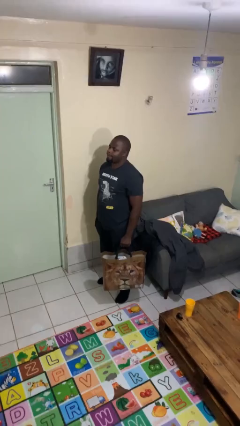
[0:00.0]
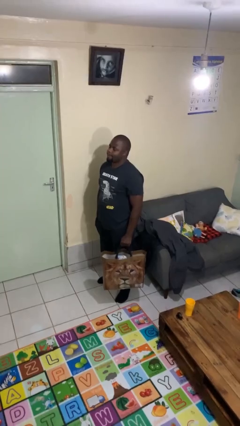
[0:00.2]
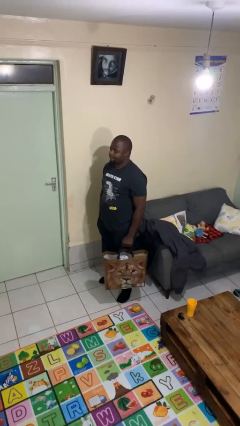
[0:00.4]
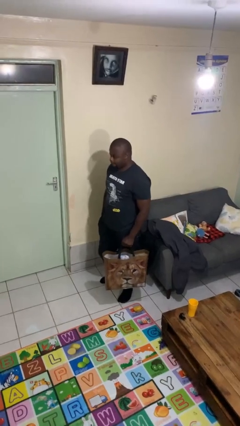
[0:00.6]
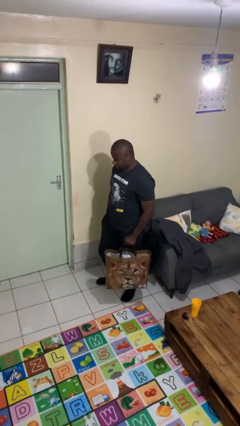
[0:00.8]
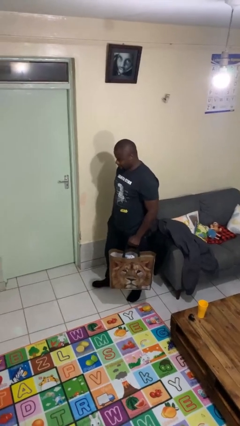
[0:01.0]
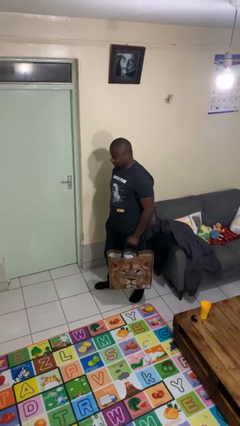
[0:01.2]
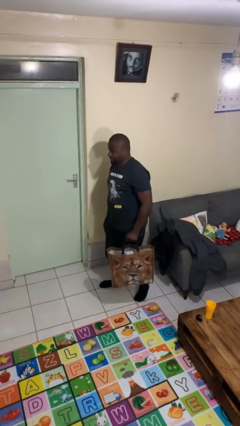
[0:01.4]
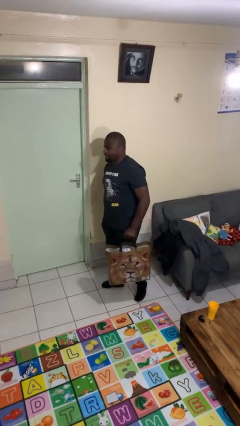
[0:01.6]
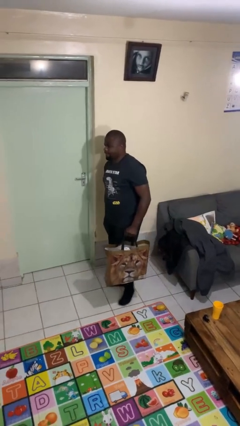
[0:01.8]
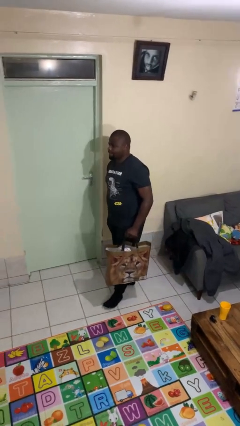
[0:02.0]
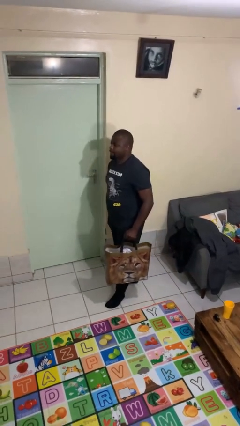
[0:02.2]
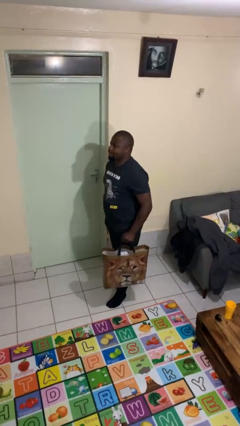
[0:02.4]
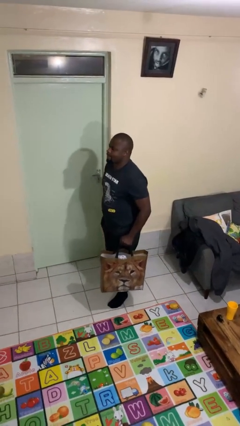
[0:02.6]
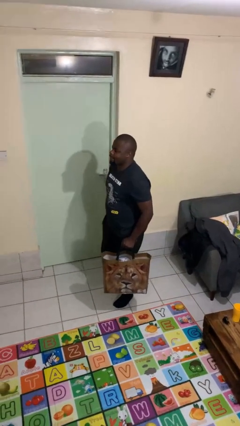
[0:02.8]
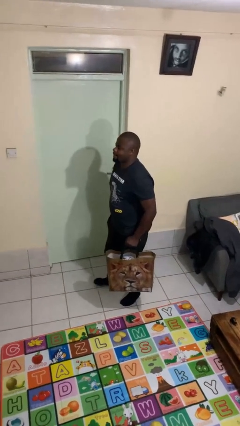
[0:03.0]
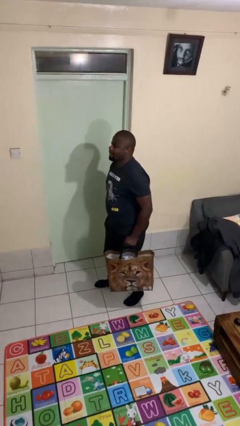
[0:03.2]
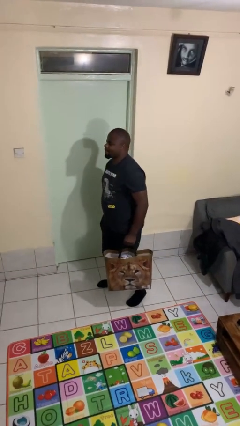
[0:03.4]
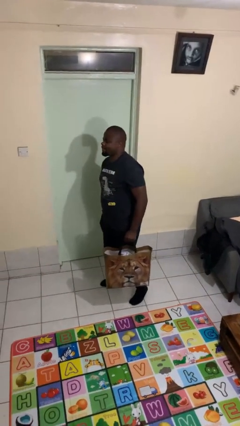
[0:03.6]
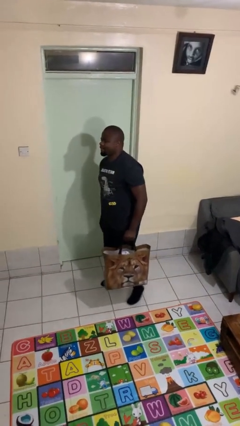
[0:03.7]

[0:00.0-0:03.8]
person carries groceries

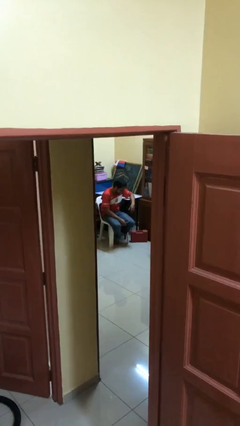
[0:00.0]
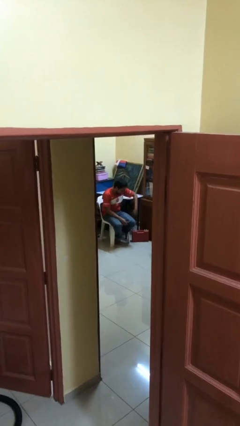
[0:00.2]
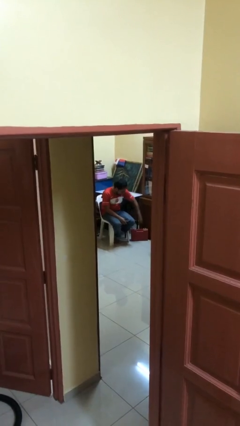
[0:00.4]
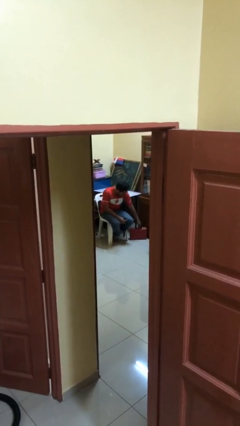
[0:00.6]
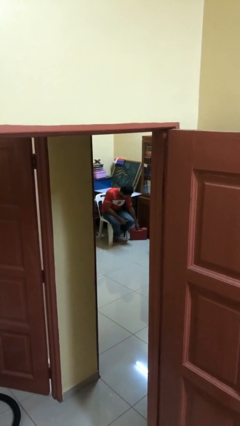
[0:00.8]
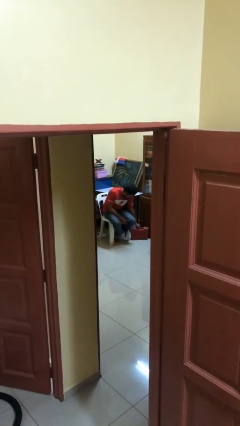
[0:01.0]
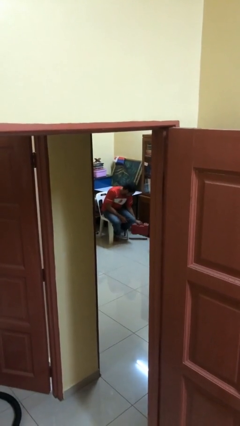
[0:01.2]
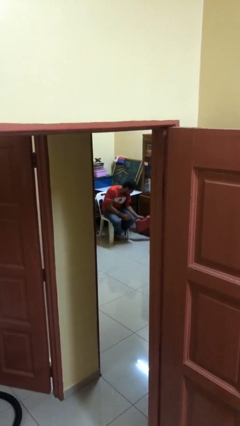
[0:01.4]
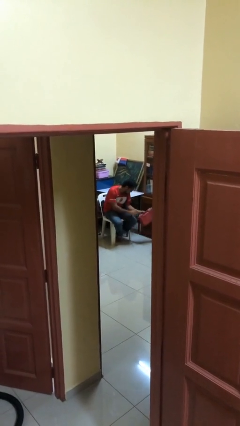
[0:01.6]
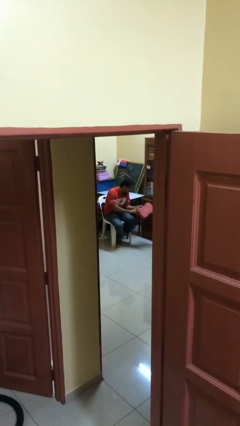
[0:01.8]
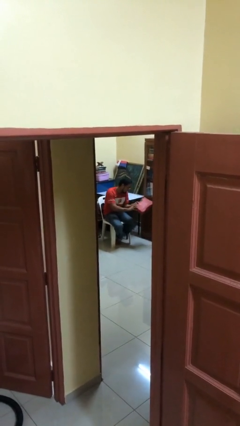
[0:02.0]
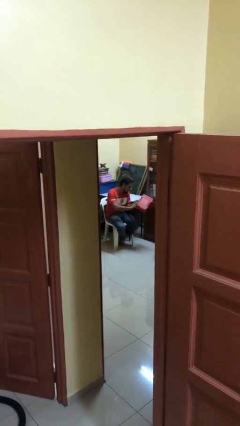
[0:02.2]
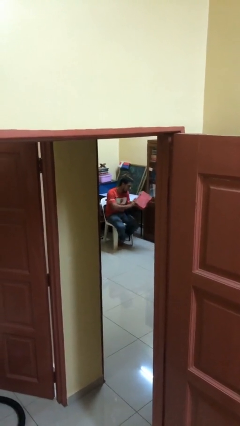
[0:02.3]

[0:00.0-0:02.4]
person picks up object from floor

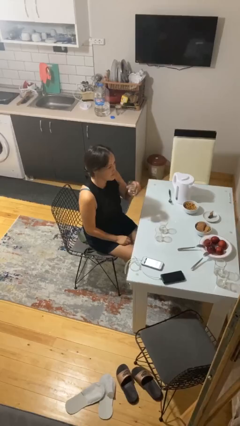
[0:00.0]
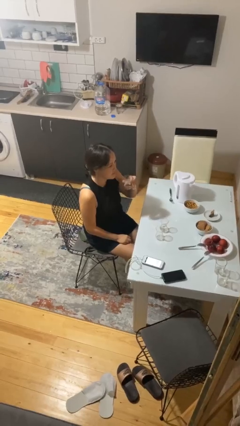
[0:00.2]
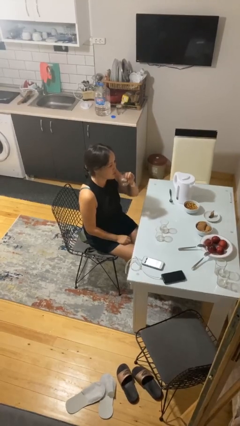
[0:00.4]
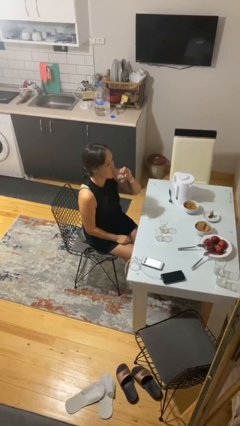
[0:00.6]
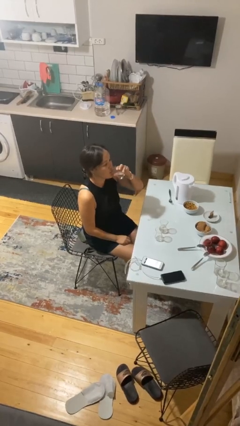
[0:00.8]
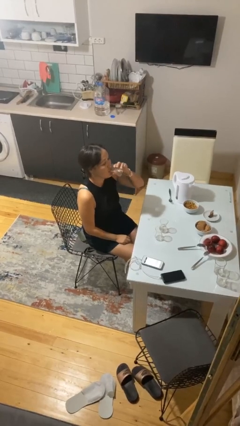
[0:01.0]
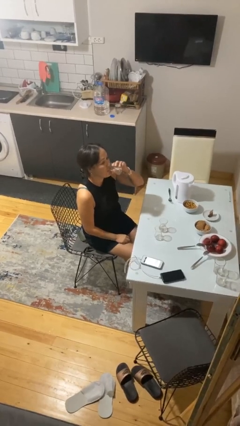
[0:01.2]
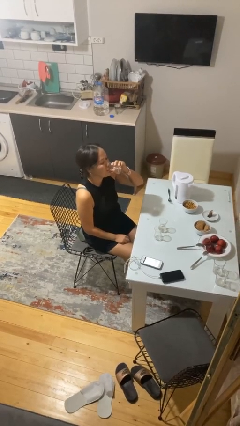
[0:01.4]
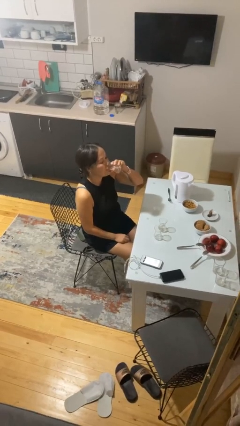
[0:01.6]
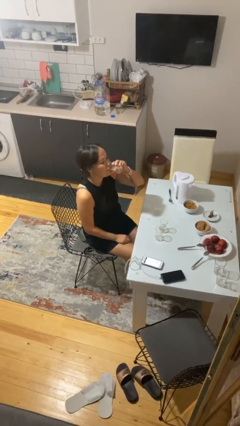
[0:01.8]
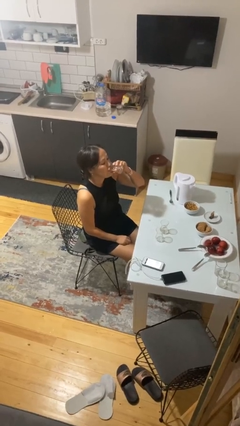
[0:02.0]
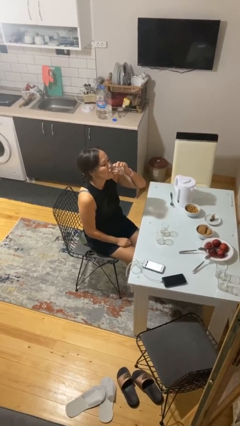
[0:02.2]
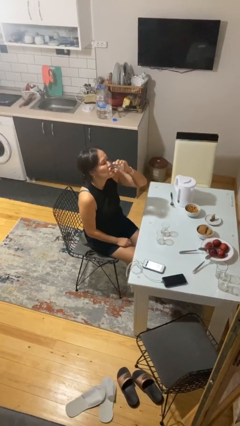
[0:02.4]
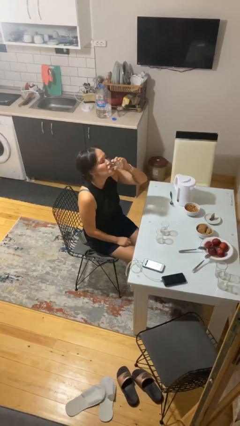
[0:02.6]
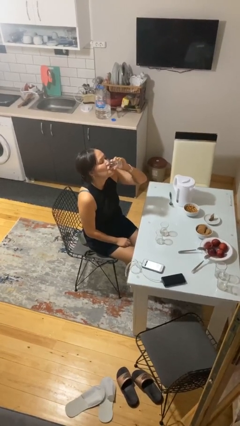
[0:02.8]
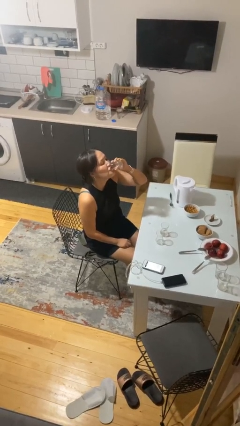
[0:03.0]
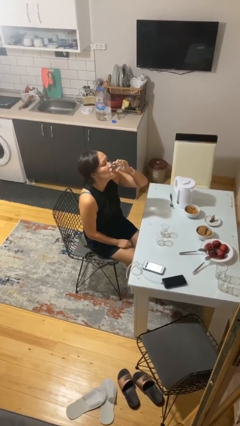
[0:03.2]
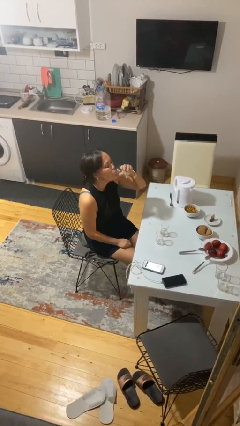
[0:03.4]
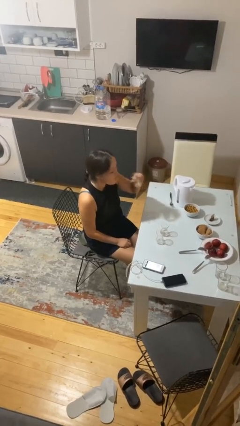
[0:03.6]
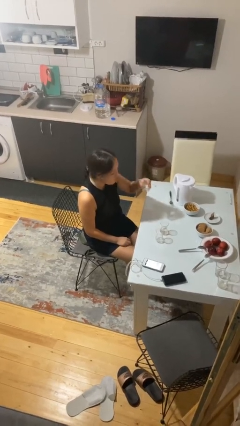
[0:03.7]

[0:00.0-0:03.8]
person drinks from shotglass

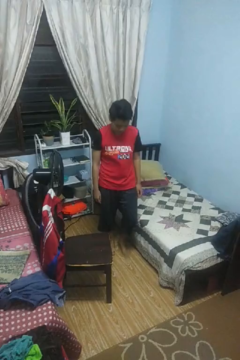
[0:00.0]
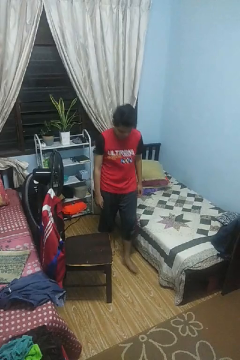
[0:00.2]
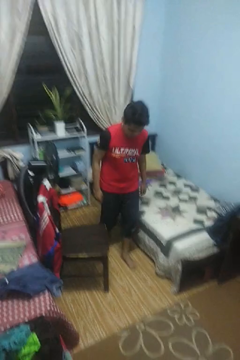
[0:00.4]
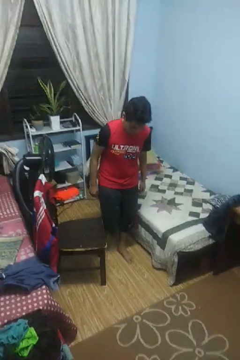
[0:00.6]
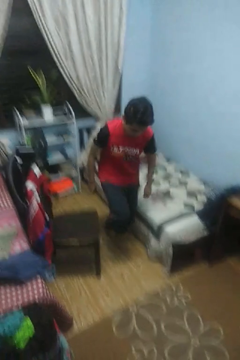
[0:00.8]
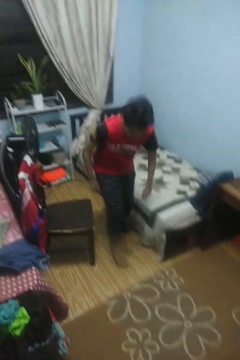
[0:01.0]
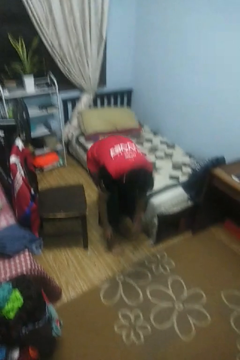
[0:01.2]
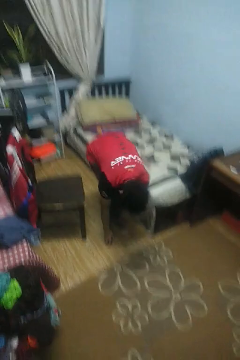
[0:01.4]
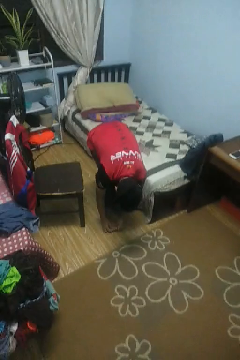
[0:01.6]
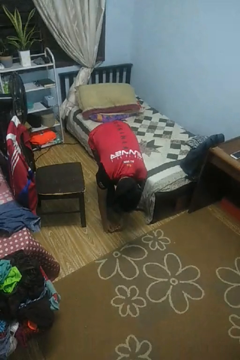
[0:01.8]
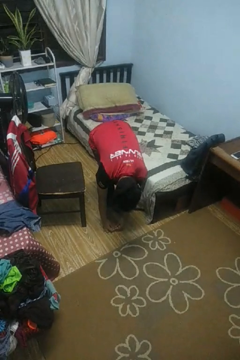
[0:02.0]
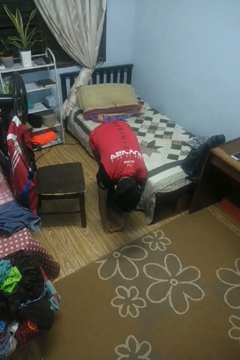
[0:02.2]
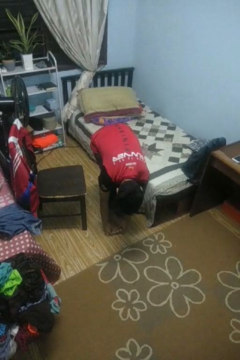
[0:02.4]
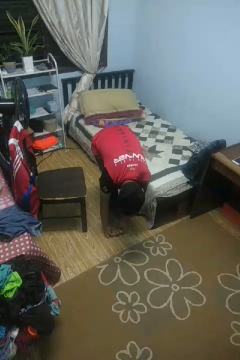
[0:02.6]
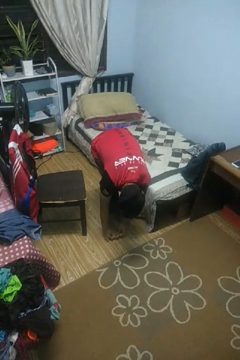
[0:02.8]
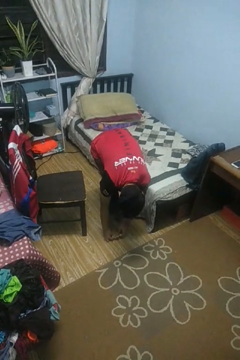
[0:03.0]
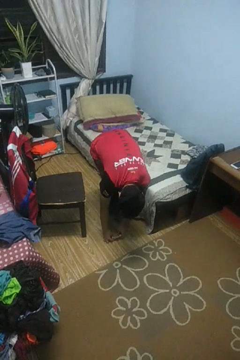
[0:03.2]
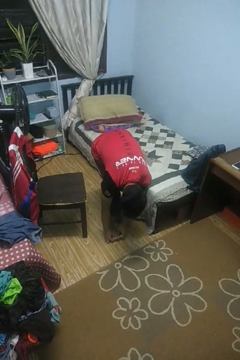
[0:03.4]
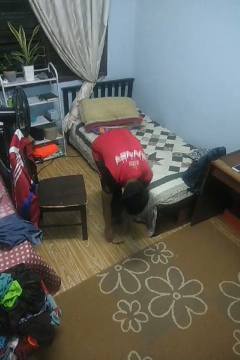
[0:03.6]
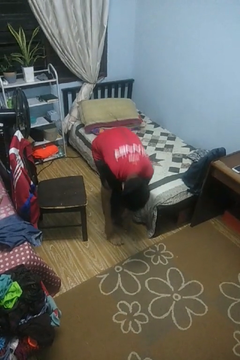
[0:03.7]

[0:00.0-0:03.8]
person stubs toe

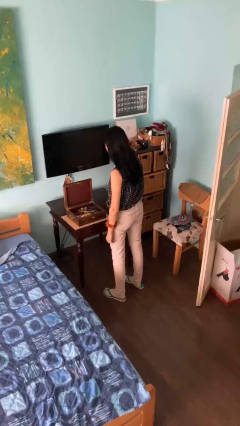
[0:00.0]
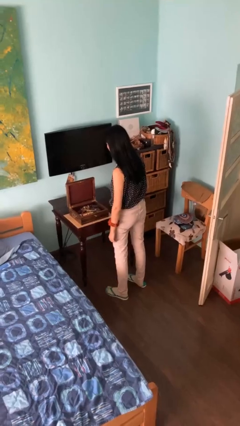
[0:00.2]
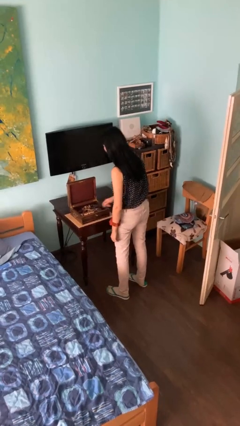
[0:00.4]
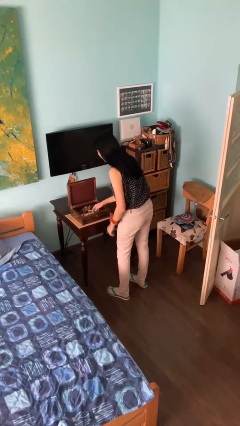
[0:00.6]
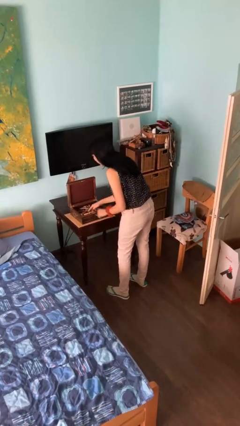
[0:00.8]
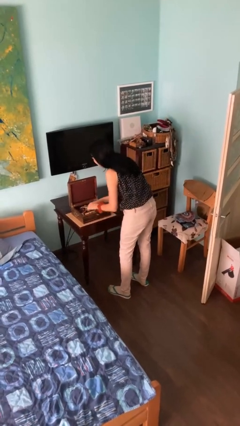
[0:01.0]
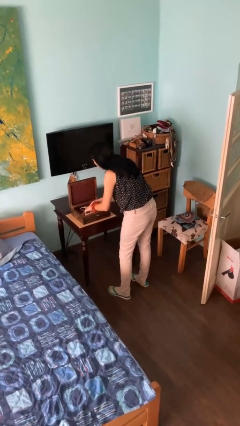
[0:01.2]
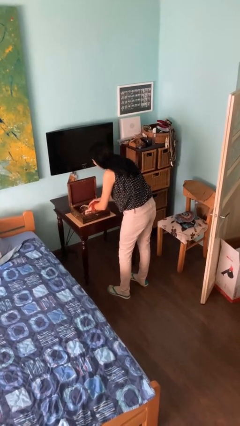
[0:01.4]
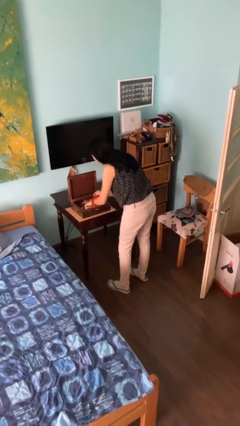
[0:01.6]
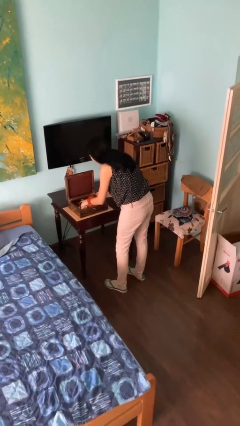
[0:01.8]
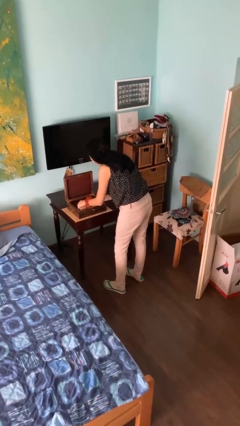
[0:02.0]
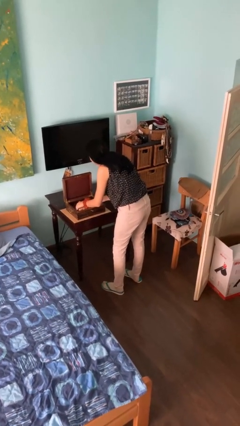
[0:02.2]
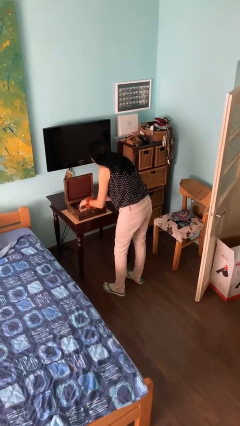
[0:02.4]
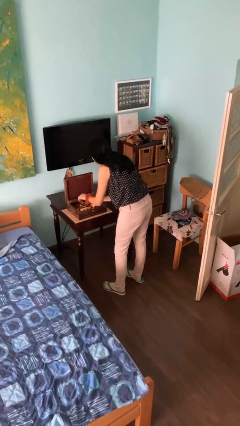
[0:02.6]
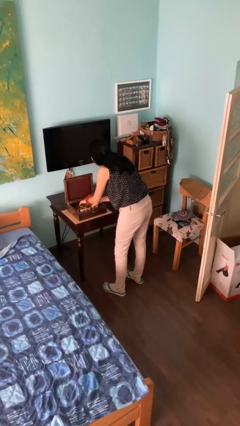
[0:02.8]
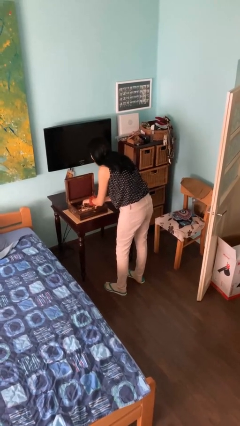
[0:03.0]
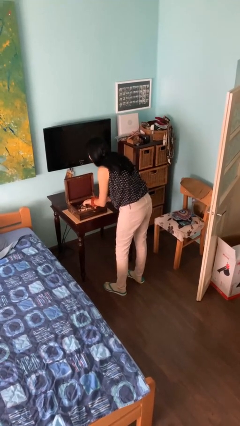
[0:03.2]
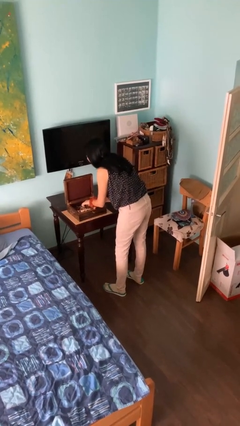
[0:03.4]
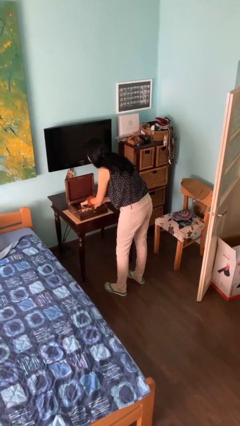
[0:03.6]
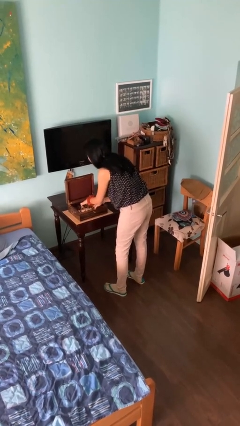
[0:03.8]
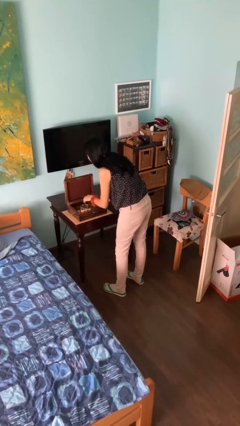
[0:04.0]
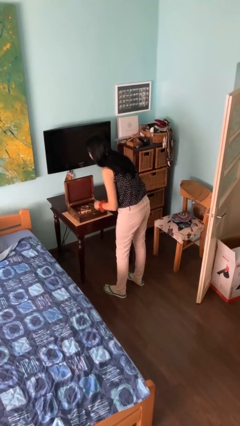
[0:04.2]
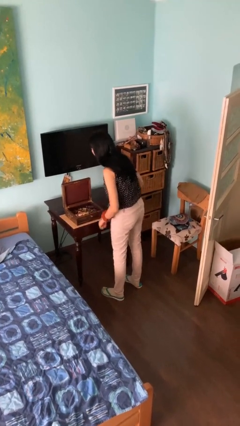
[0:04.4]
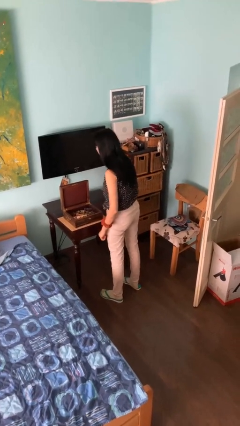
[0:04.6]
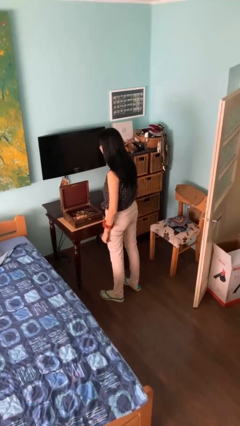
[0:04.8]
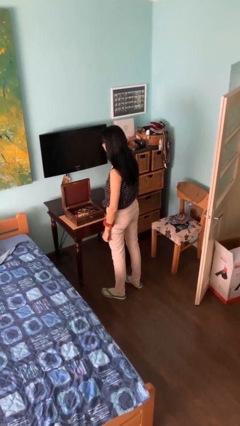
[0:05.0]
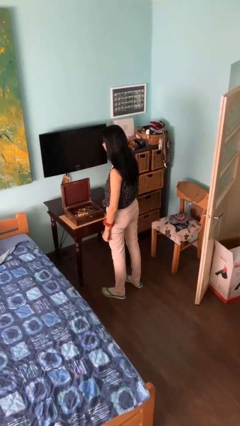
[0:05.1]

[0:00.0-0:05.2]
person searches jewelry box
